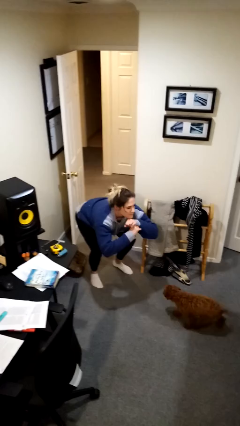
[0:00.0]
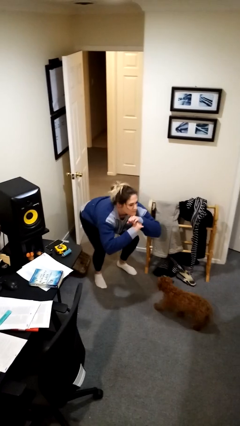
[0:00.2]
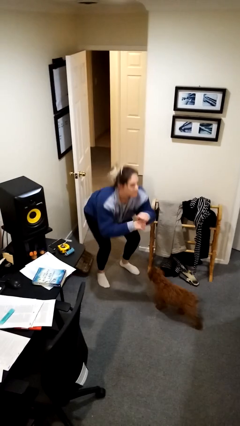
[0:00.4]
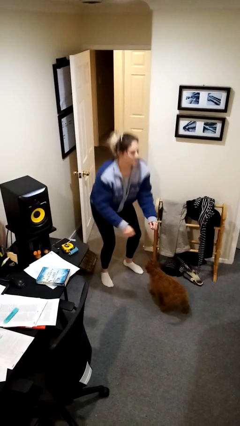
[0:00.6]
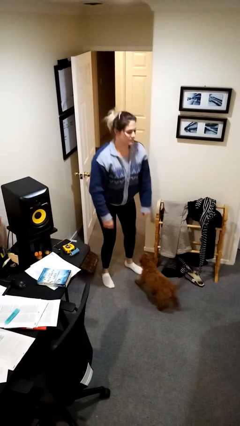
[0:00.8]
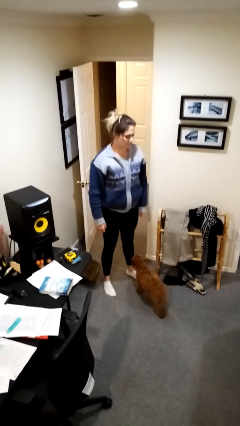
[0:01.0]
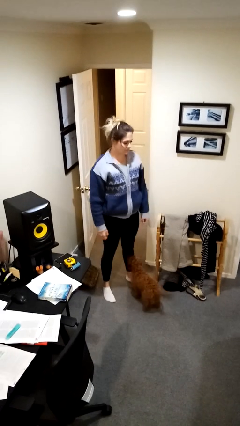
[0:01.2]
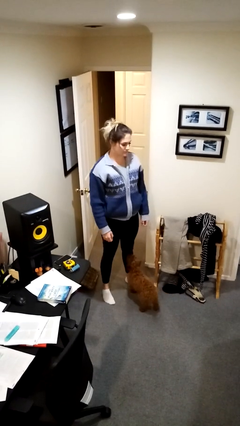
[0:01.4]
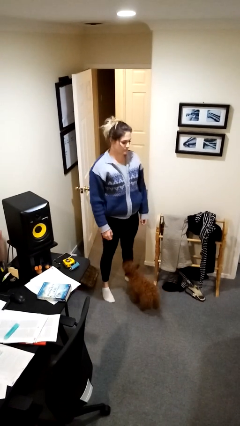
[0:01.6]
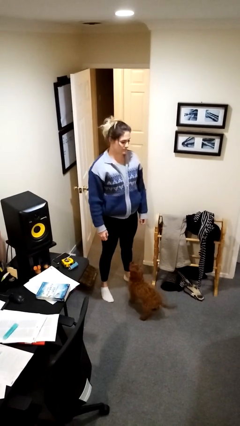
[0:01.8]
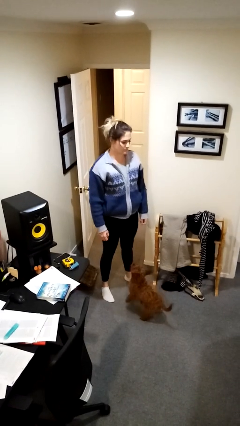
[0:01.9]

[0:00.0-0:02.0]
person stands up

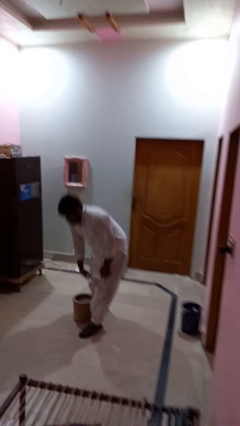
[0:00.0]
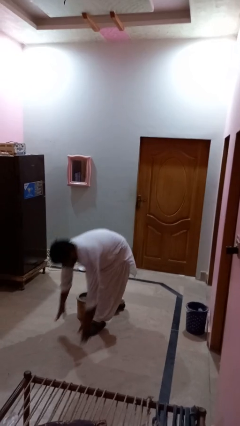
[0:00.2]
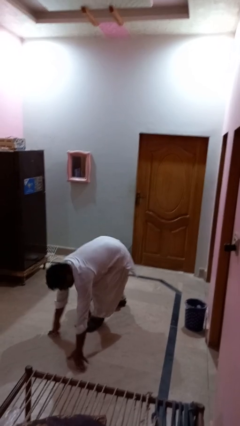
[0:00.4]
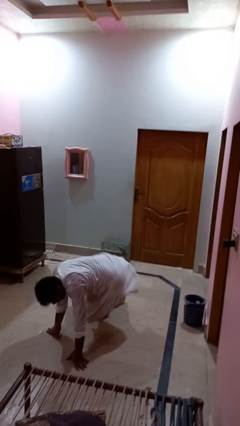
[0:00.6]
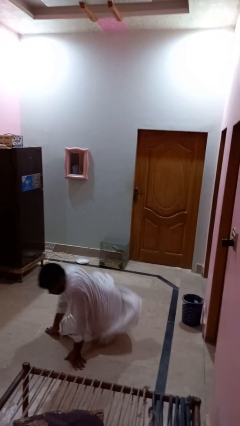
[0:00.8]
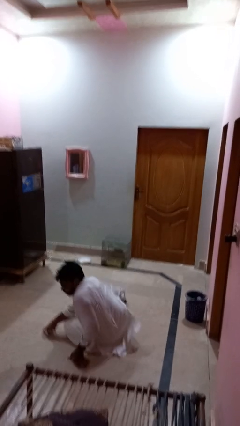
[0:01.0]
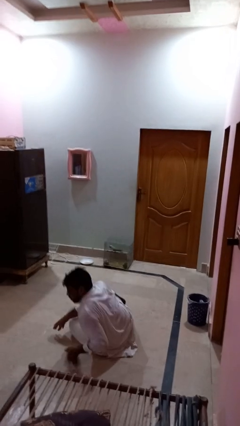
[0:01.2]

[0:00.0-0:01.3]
person trips on object on floor

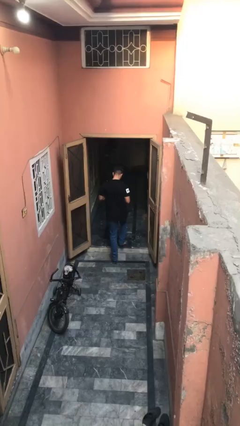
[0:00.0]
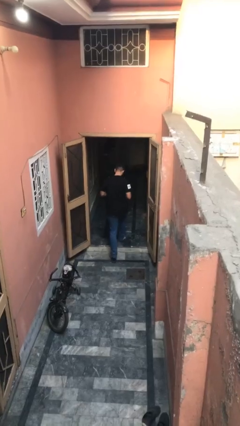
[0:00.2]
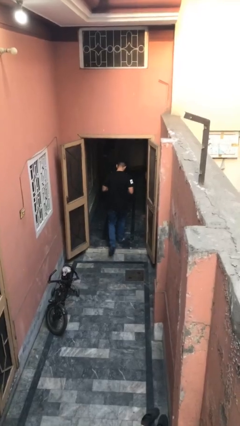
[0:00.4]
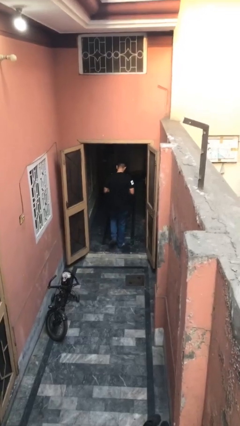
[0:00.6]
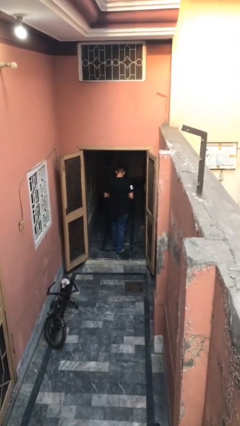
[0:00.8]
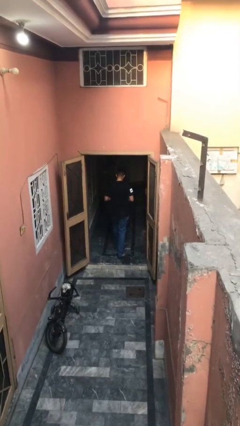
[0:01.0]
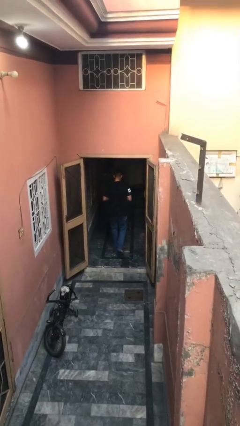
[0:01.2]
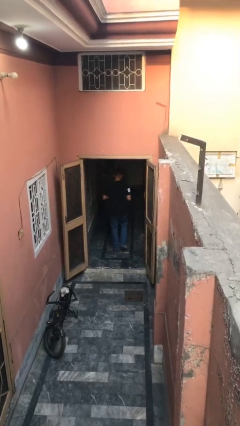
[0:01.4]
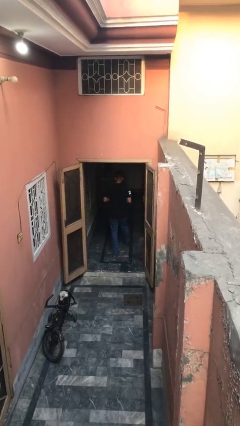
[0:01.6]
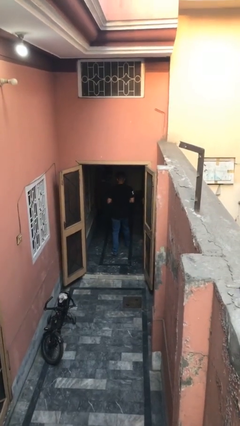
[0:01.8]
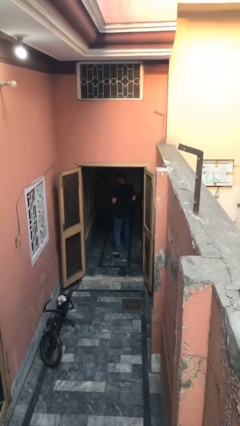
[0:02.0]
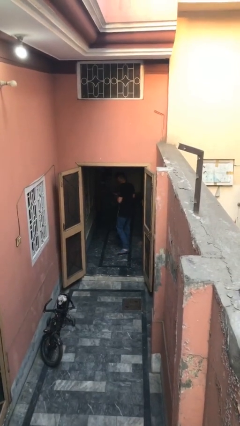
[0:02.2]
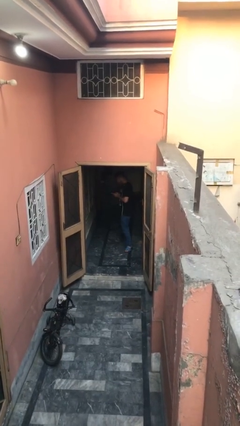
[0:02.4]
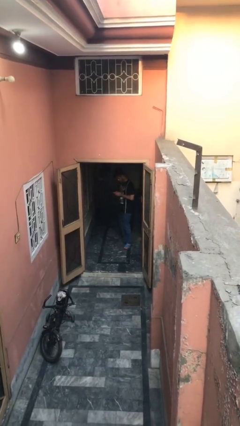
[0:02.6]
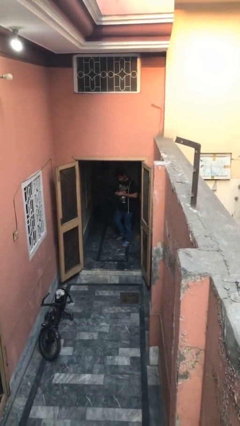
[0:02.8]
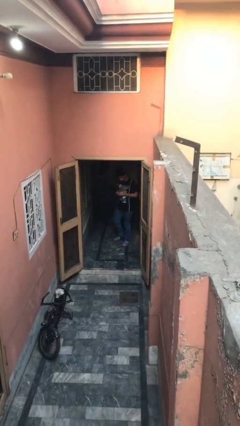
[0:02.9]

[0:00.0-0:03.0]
person exits scene through structure

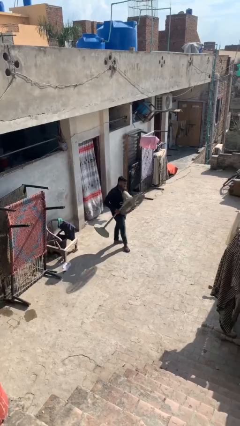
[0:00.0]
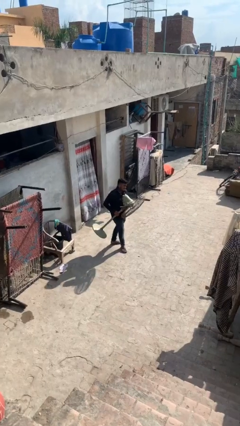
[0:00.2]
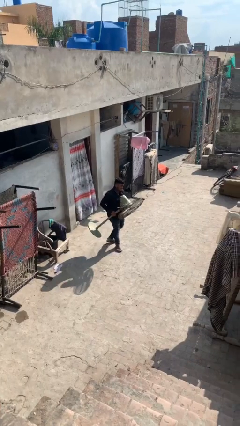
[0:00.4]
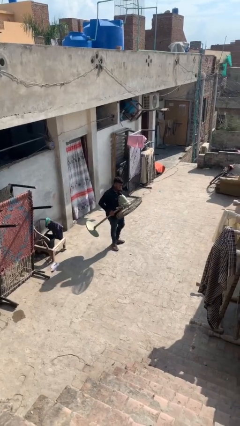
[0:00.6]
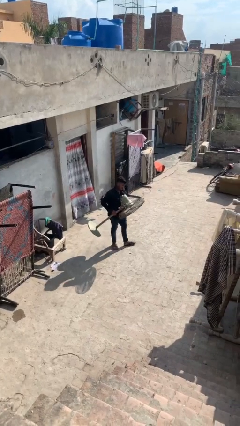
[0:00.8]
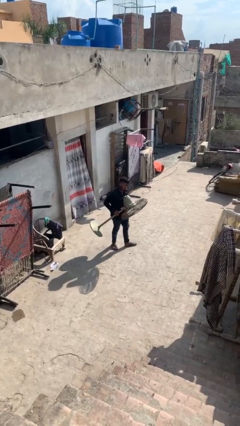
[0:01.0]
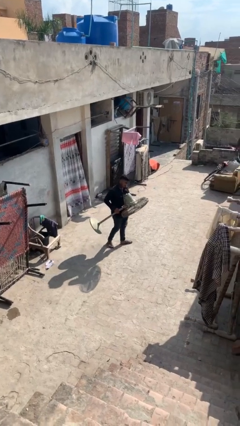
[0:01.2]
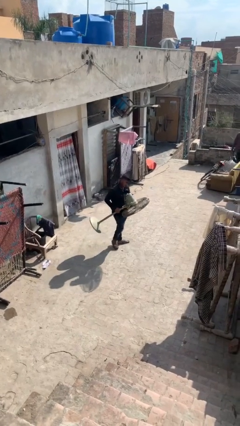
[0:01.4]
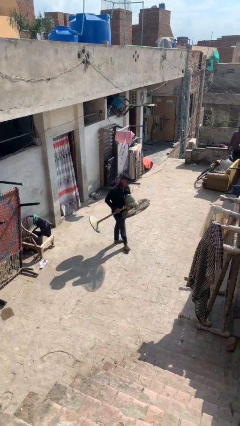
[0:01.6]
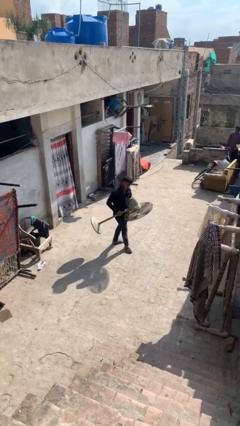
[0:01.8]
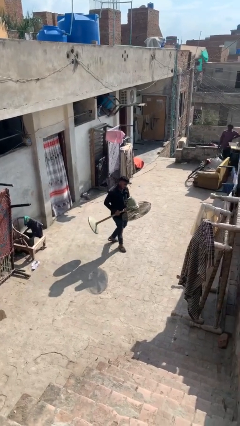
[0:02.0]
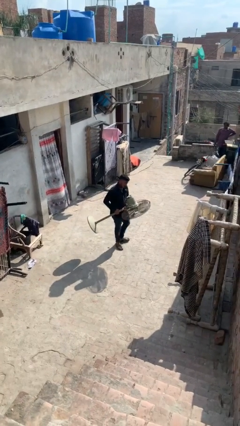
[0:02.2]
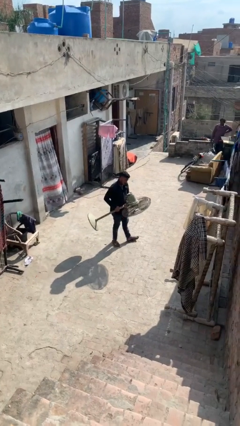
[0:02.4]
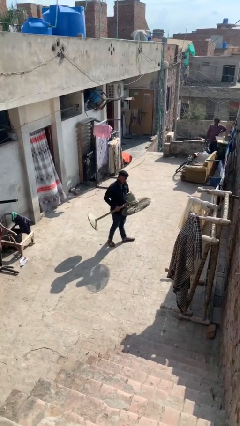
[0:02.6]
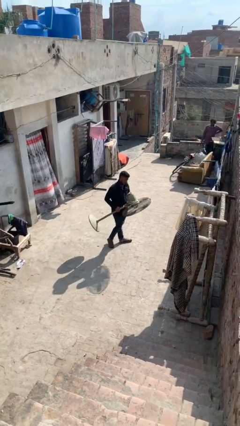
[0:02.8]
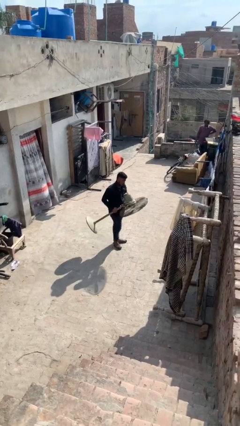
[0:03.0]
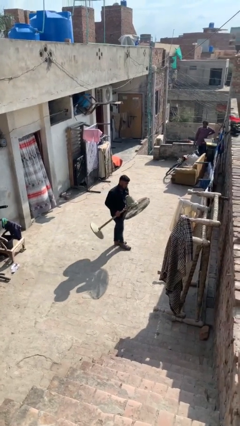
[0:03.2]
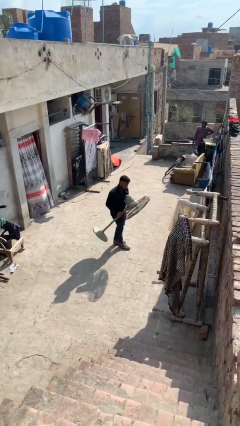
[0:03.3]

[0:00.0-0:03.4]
person carries heavy object

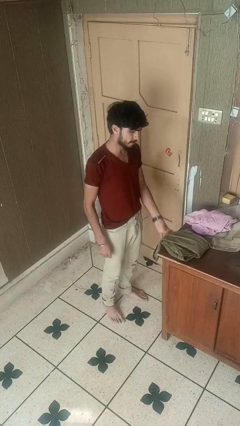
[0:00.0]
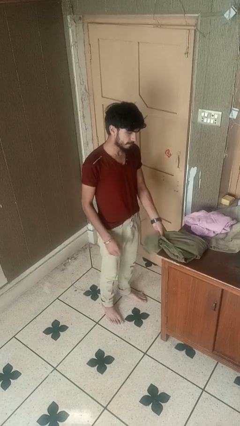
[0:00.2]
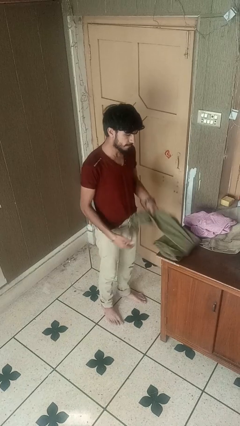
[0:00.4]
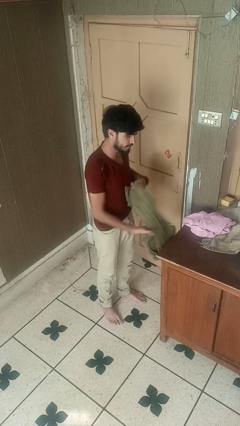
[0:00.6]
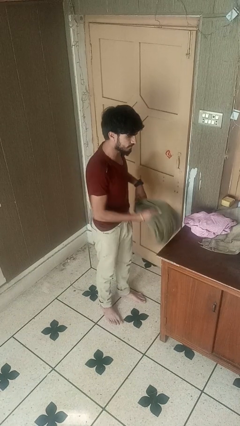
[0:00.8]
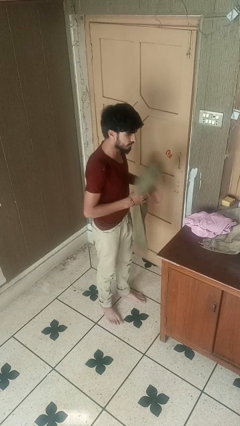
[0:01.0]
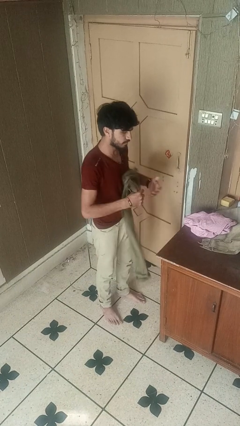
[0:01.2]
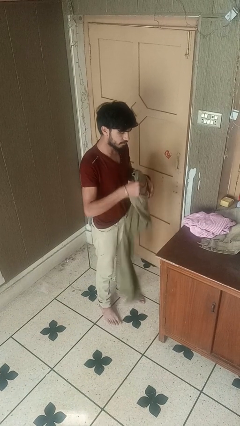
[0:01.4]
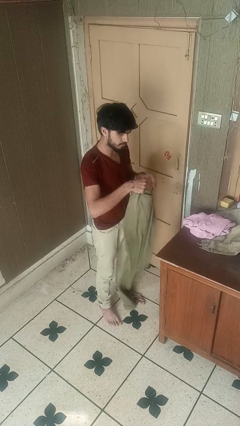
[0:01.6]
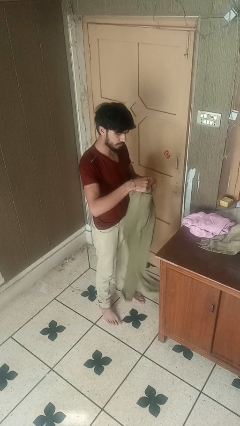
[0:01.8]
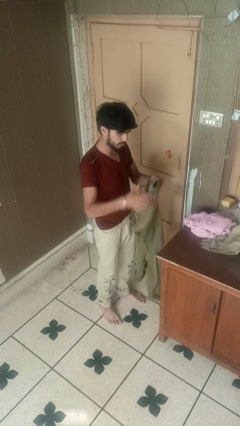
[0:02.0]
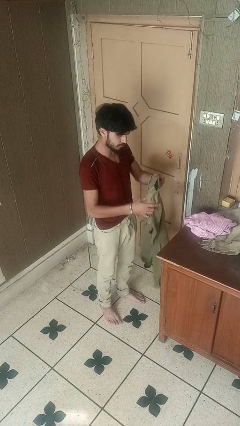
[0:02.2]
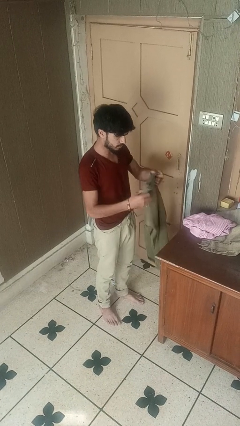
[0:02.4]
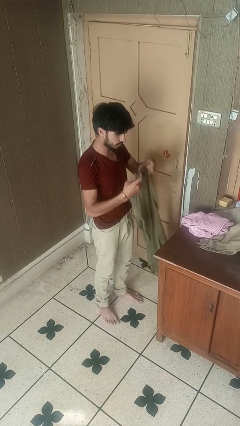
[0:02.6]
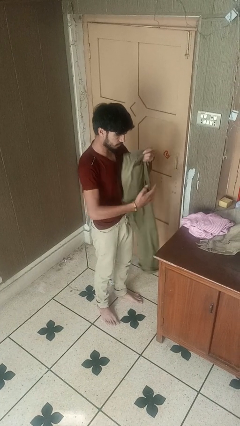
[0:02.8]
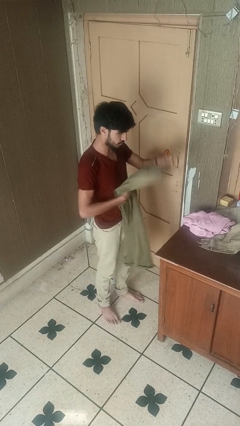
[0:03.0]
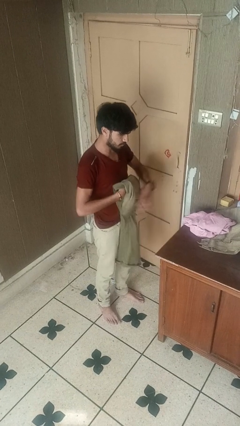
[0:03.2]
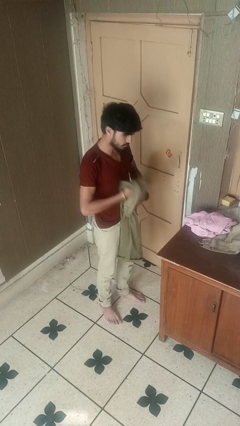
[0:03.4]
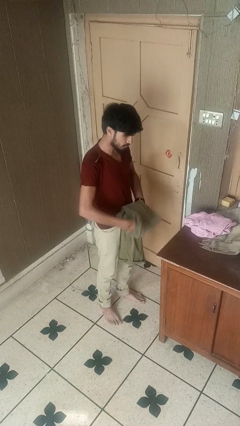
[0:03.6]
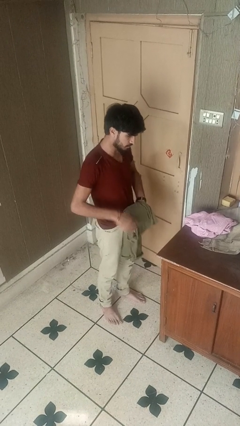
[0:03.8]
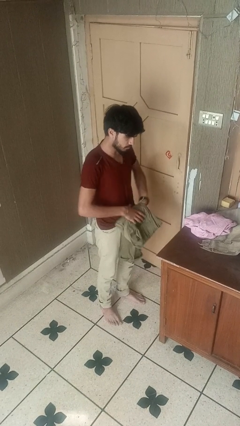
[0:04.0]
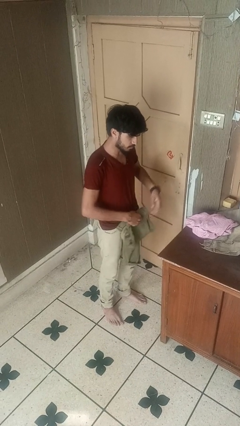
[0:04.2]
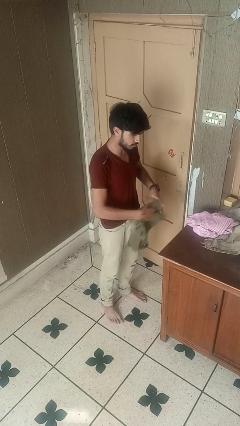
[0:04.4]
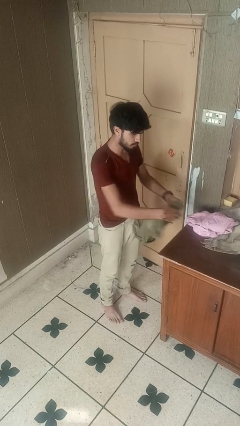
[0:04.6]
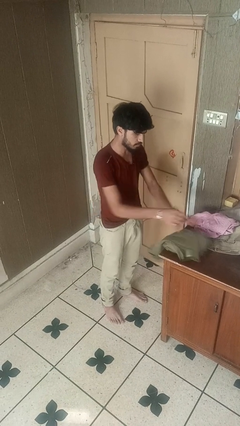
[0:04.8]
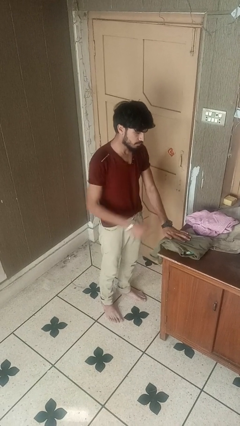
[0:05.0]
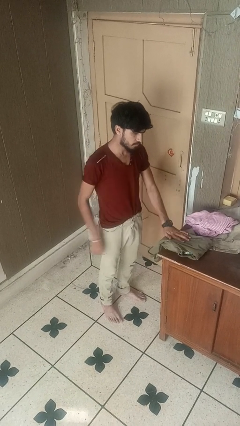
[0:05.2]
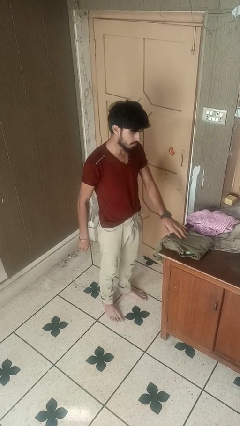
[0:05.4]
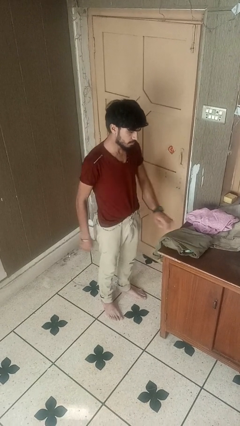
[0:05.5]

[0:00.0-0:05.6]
person folds pants

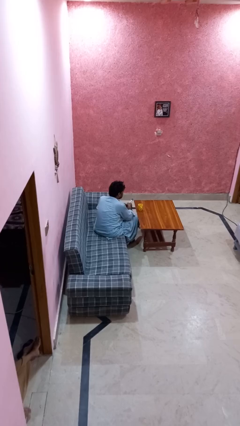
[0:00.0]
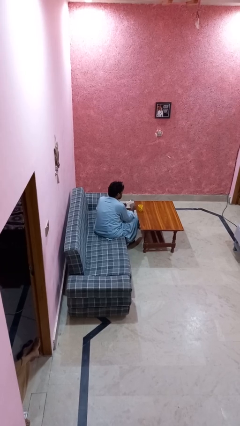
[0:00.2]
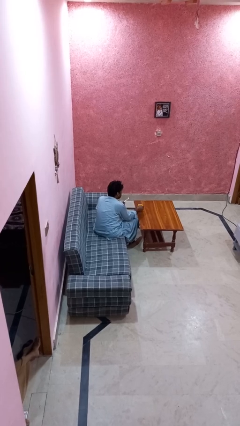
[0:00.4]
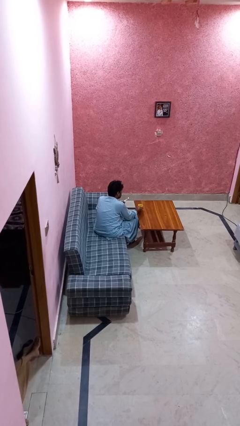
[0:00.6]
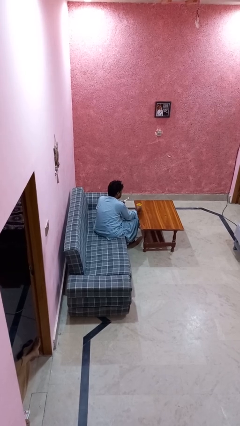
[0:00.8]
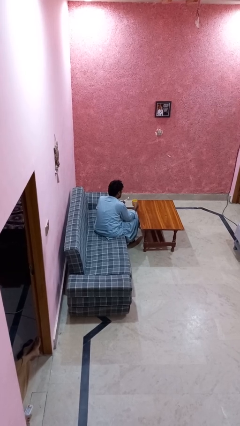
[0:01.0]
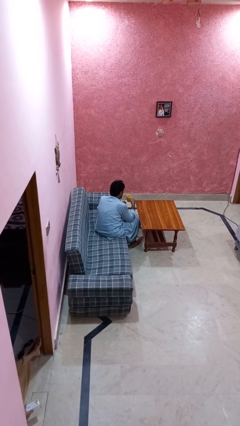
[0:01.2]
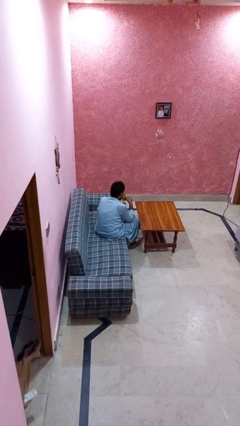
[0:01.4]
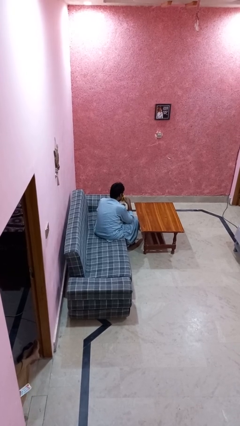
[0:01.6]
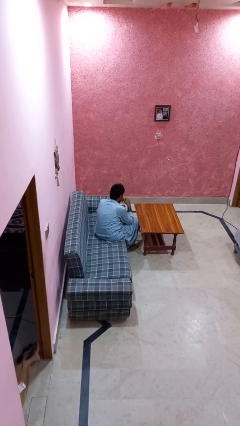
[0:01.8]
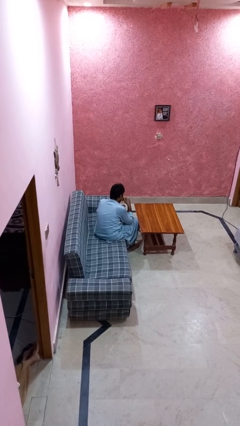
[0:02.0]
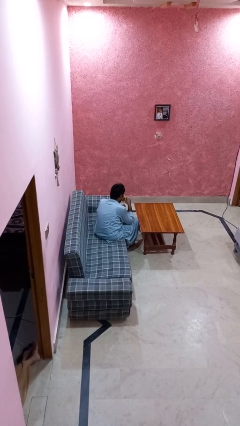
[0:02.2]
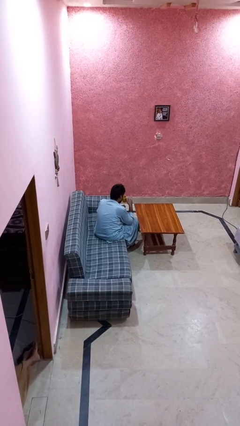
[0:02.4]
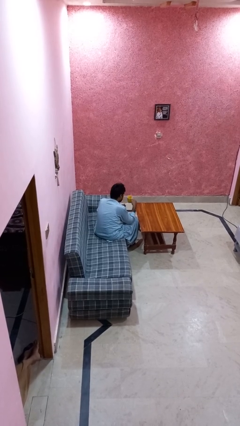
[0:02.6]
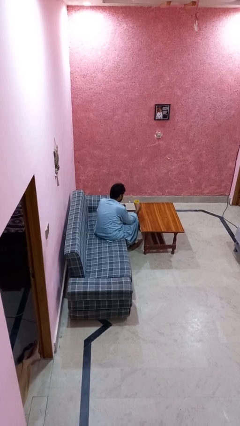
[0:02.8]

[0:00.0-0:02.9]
person drinks from mug
